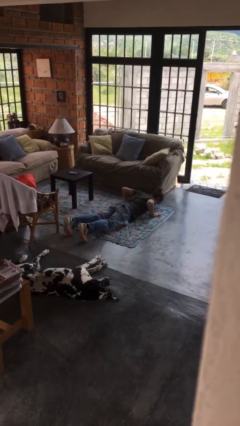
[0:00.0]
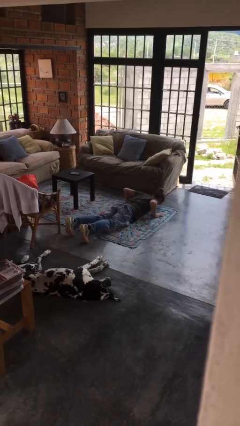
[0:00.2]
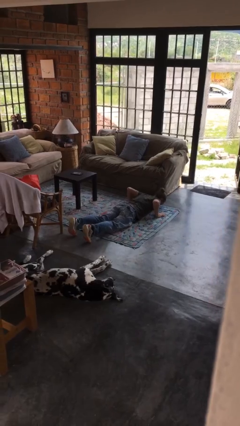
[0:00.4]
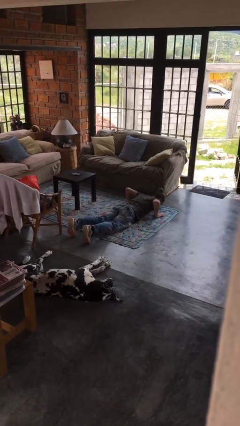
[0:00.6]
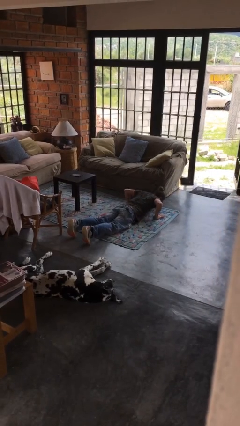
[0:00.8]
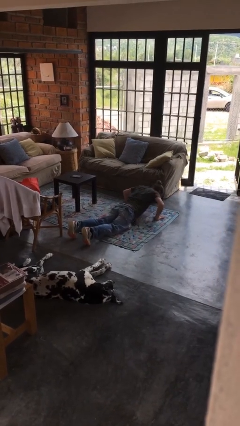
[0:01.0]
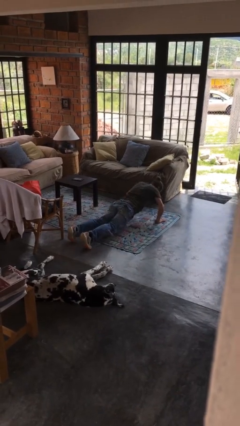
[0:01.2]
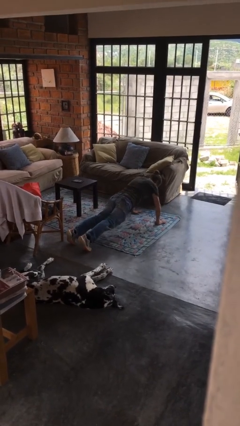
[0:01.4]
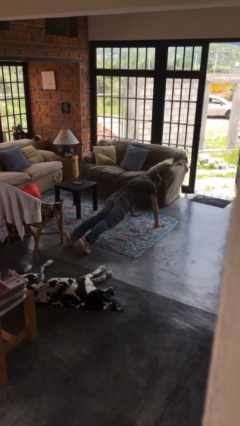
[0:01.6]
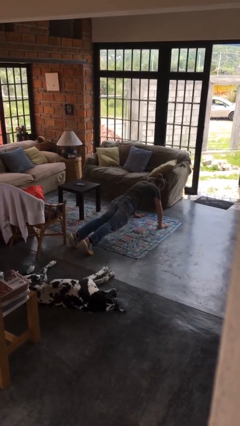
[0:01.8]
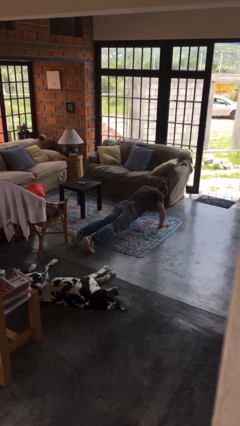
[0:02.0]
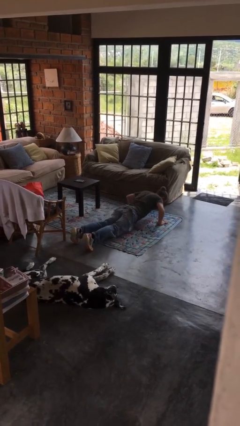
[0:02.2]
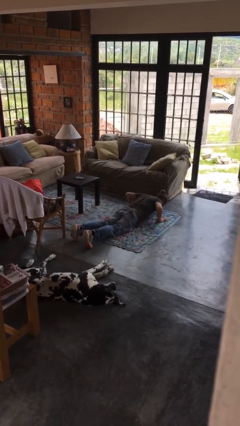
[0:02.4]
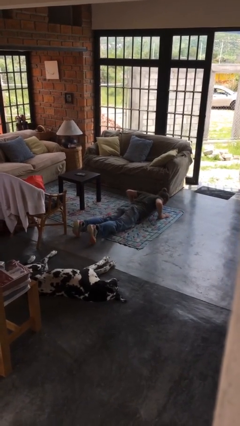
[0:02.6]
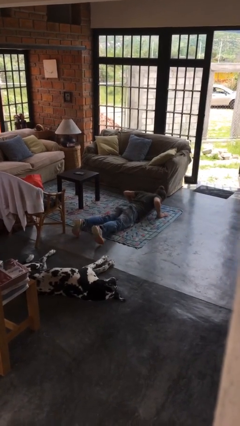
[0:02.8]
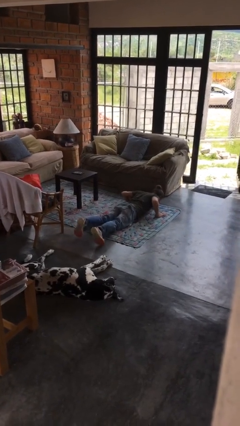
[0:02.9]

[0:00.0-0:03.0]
person exercises with pushup

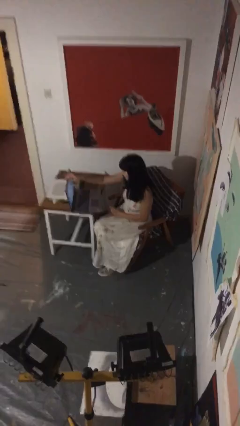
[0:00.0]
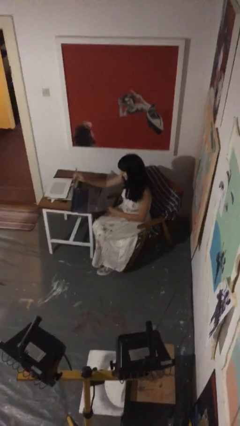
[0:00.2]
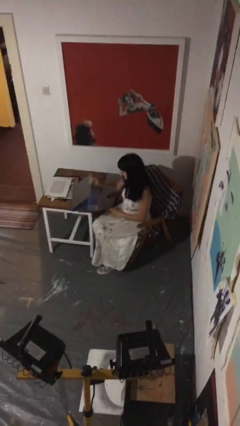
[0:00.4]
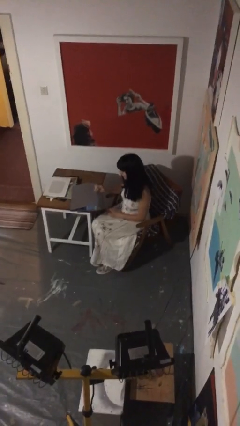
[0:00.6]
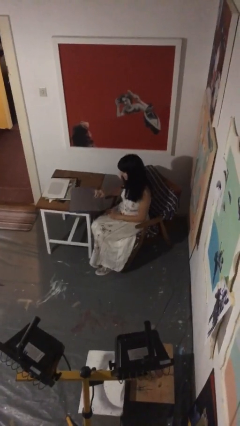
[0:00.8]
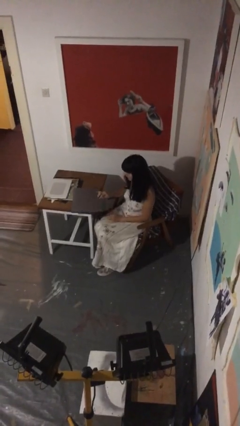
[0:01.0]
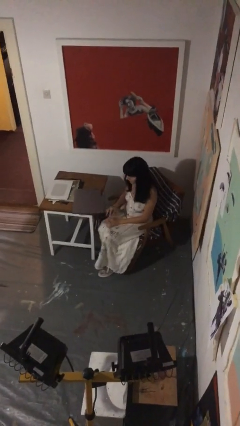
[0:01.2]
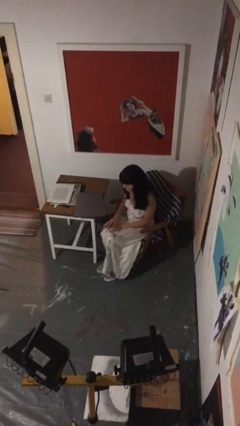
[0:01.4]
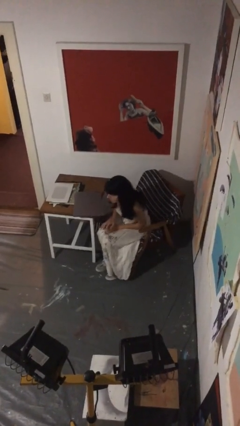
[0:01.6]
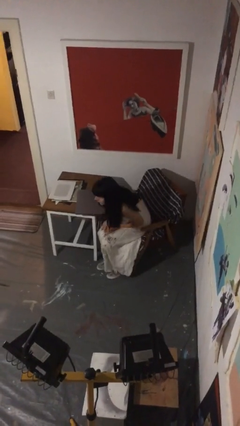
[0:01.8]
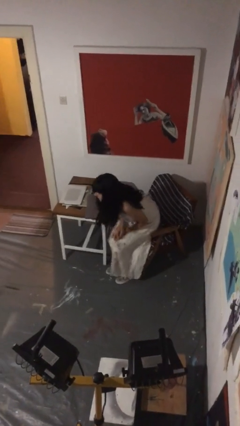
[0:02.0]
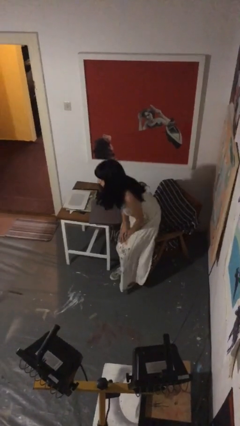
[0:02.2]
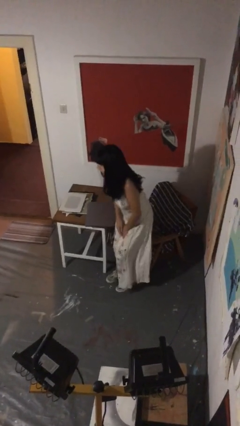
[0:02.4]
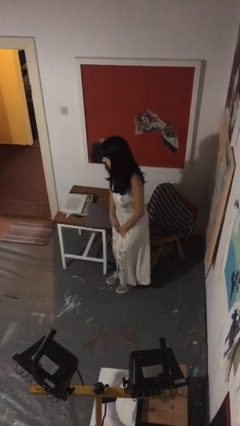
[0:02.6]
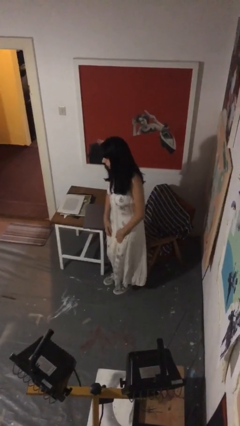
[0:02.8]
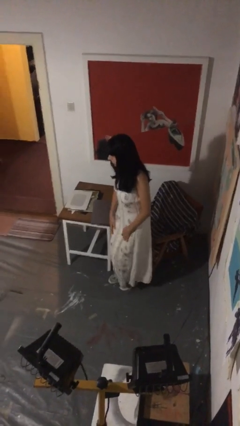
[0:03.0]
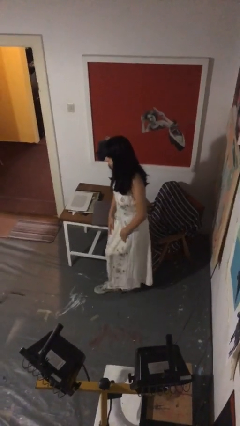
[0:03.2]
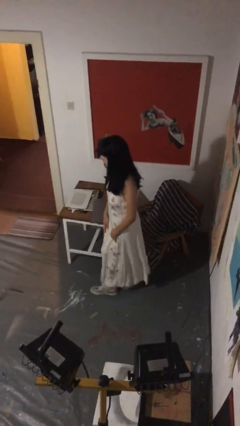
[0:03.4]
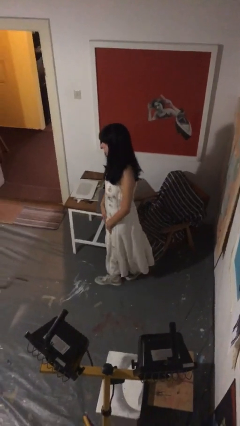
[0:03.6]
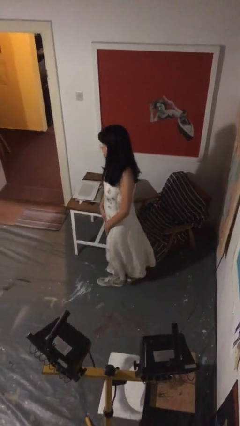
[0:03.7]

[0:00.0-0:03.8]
person stands up

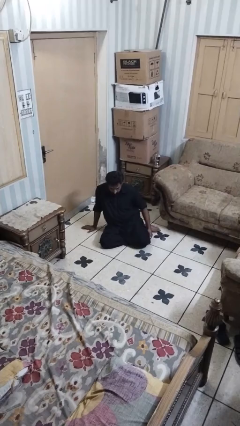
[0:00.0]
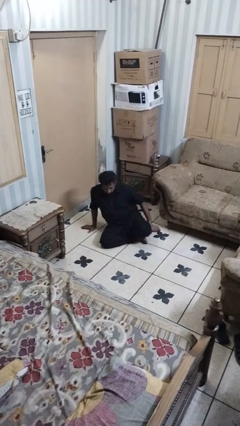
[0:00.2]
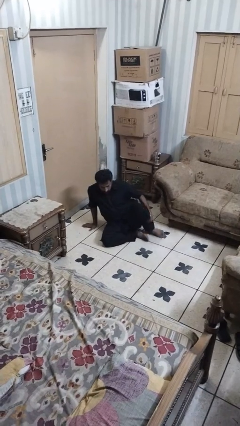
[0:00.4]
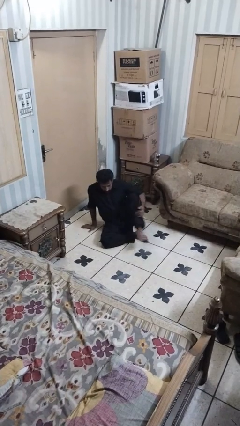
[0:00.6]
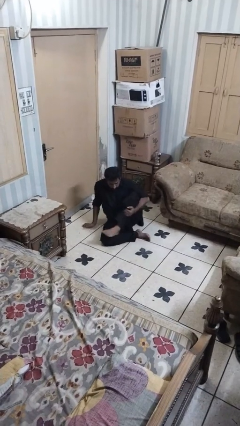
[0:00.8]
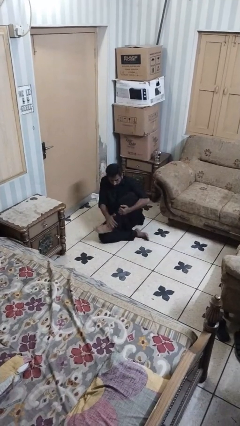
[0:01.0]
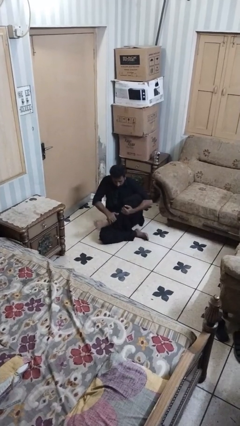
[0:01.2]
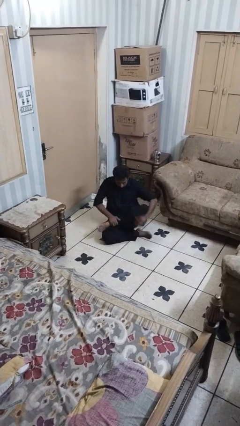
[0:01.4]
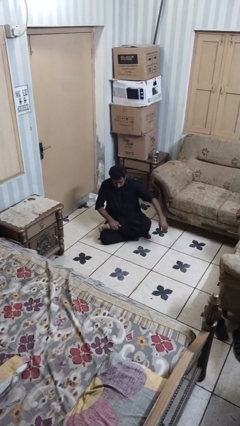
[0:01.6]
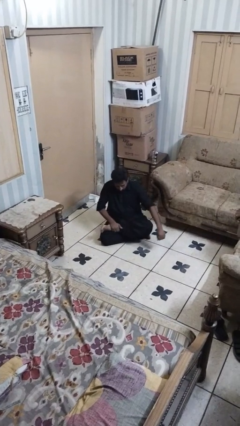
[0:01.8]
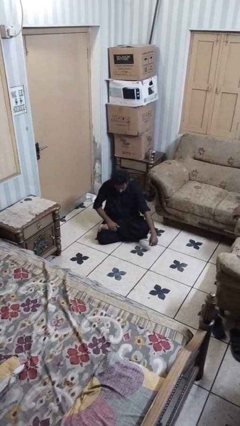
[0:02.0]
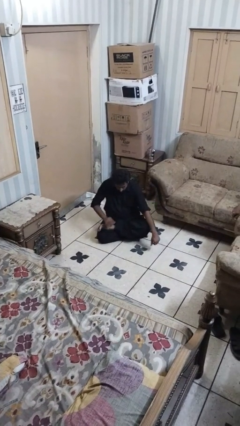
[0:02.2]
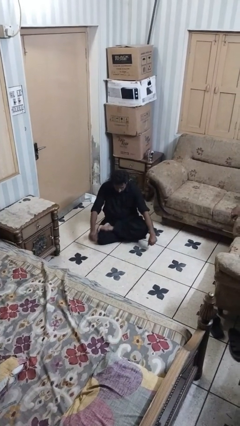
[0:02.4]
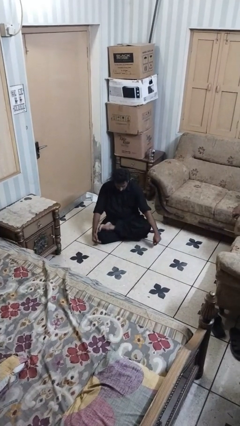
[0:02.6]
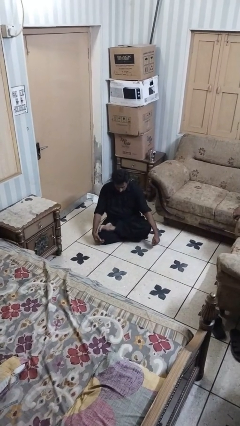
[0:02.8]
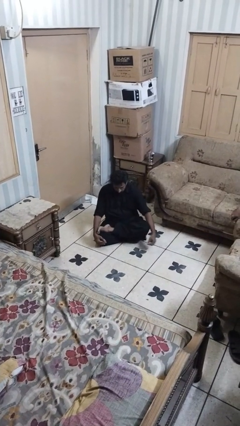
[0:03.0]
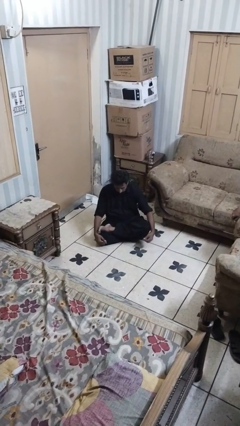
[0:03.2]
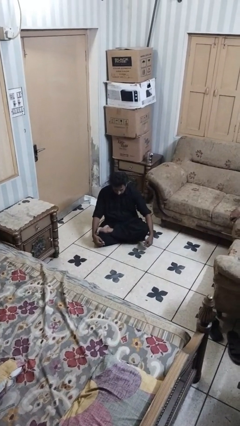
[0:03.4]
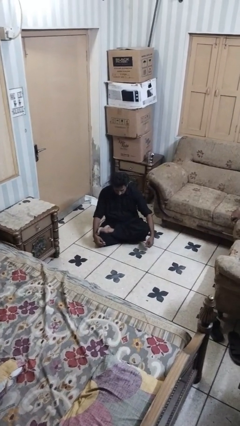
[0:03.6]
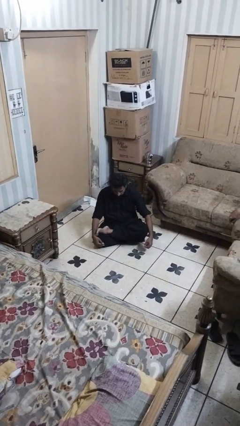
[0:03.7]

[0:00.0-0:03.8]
person crosses legs

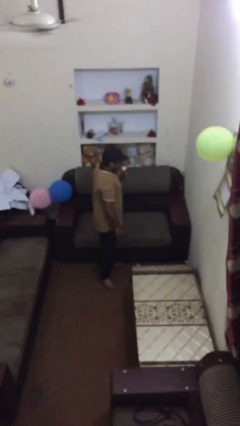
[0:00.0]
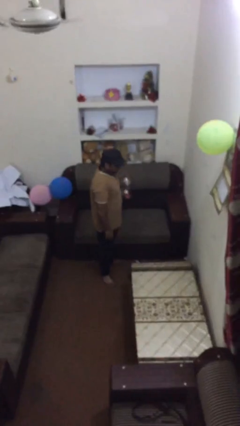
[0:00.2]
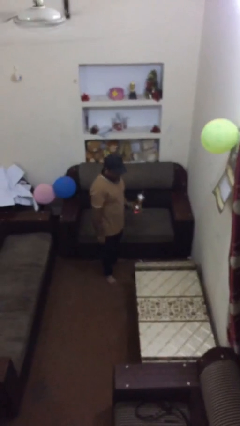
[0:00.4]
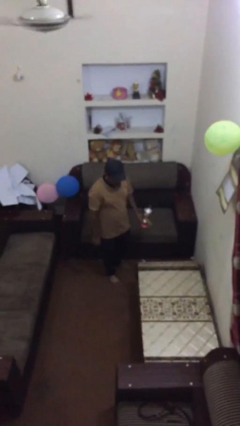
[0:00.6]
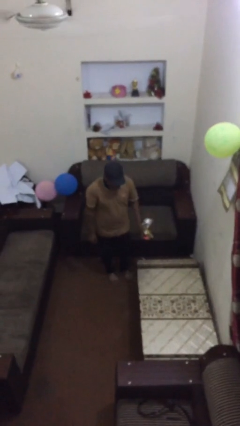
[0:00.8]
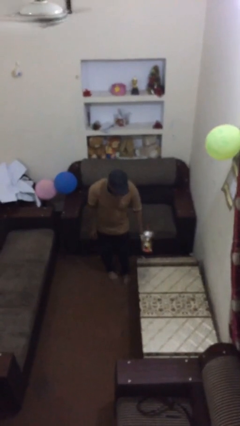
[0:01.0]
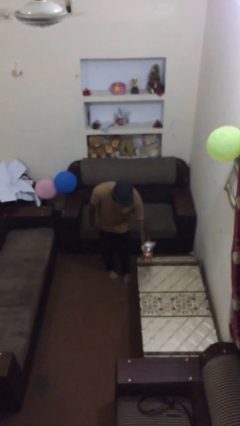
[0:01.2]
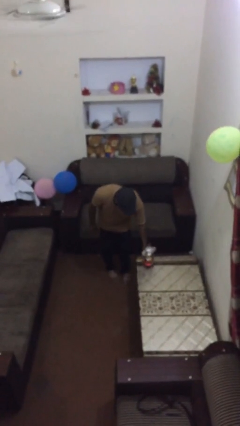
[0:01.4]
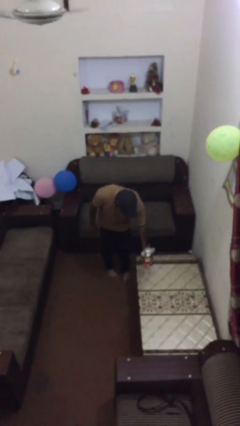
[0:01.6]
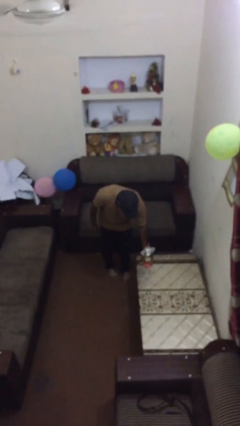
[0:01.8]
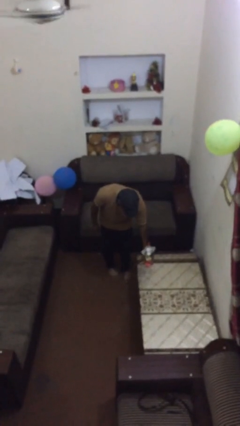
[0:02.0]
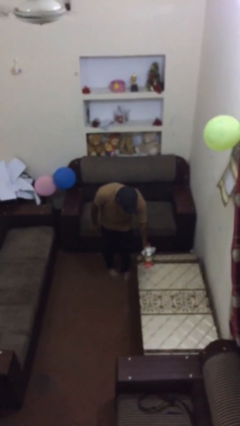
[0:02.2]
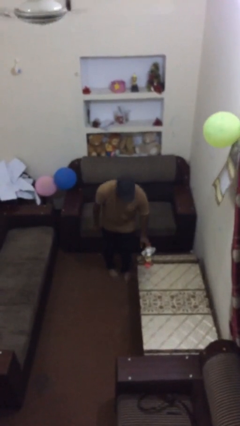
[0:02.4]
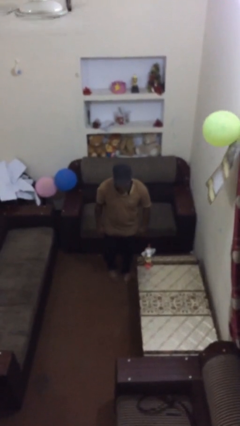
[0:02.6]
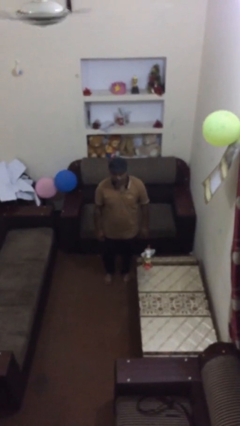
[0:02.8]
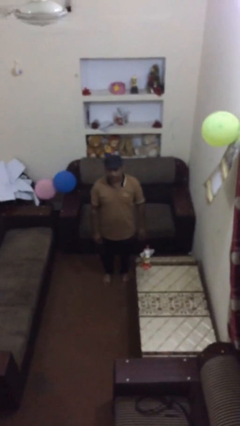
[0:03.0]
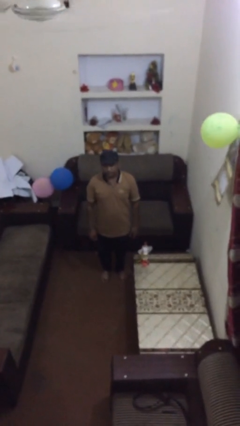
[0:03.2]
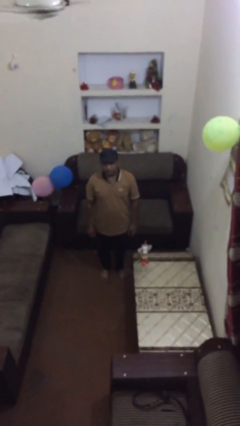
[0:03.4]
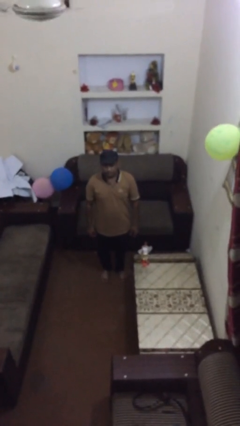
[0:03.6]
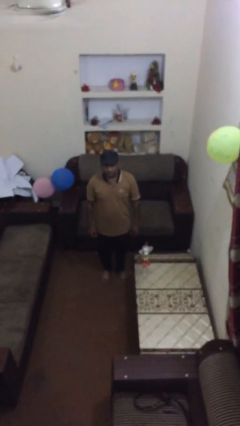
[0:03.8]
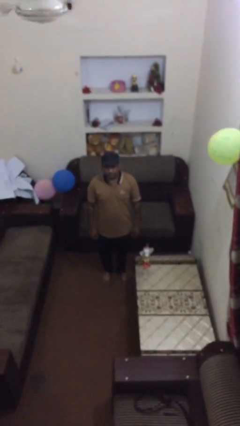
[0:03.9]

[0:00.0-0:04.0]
person puts down object on table

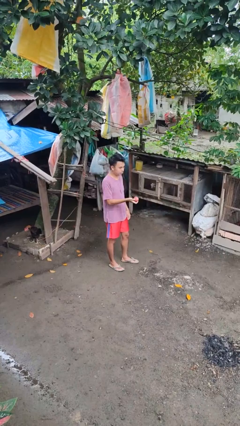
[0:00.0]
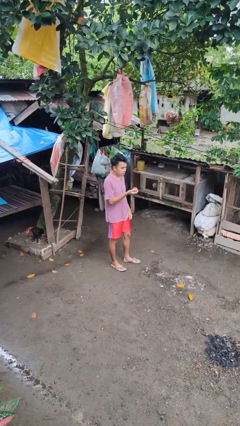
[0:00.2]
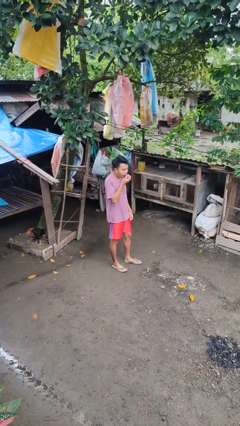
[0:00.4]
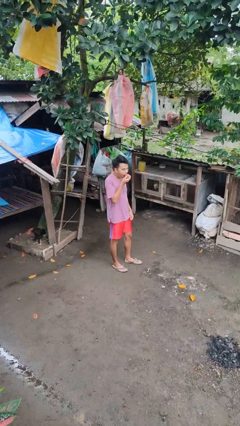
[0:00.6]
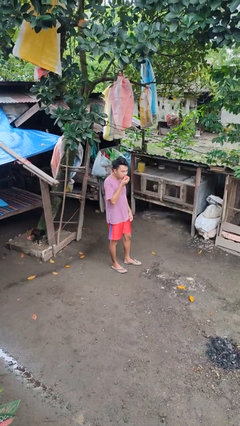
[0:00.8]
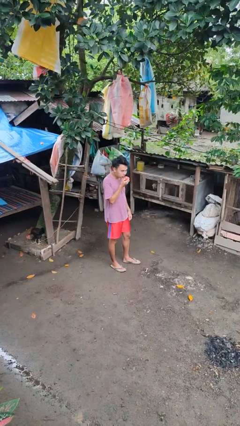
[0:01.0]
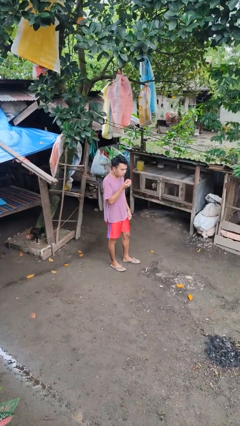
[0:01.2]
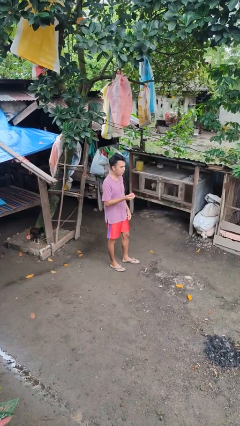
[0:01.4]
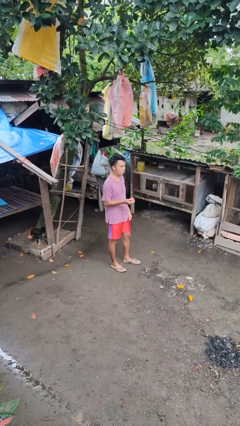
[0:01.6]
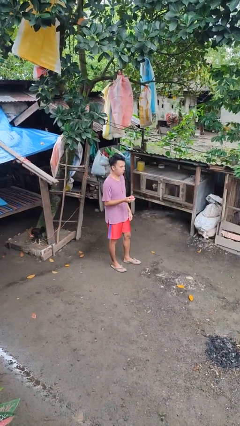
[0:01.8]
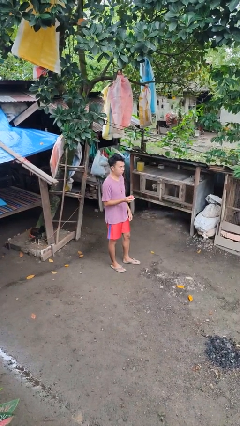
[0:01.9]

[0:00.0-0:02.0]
person eats apple

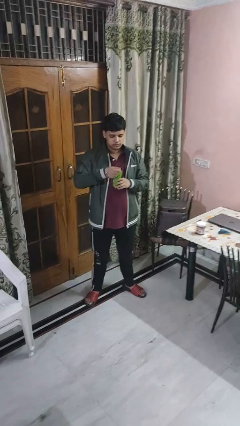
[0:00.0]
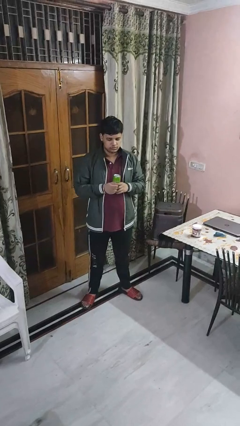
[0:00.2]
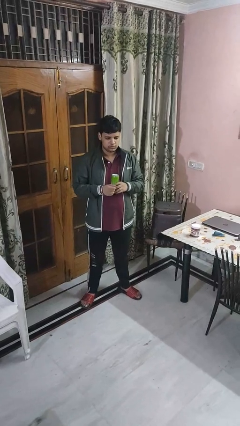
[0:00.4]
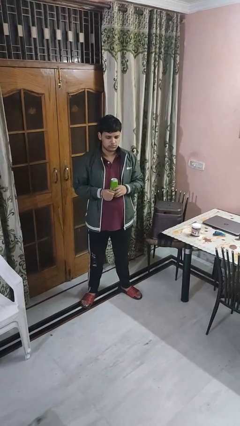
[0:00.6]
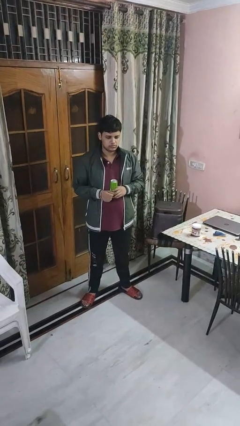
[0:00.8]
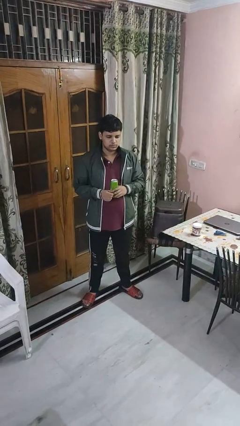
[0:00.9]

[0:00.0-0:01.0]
person opens beverage can

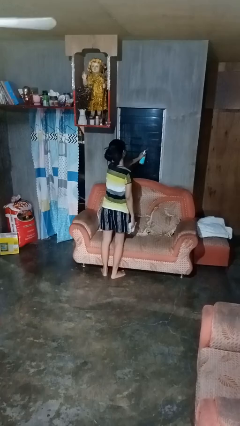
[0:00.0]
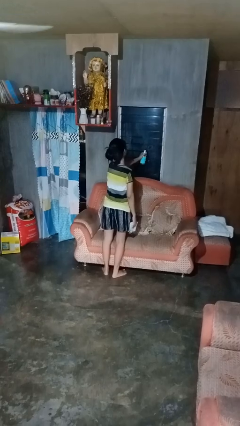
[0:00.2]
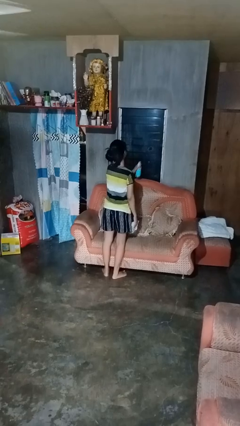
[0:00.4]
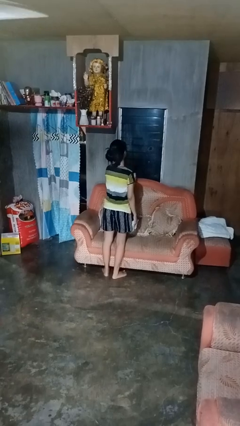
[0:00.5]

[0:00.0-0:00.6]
person sprays from bottle
